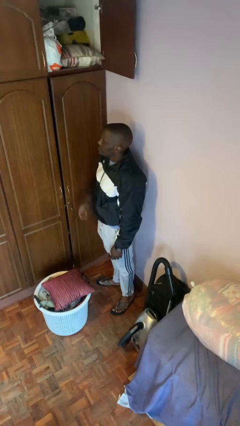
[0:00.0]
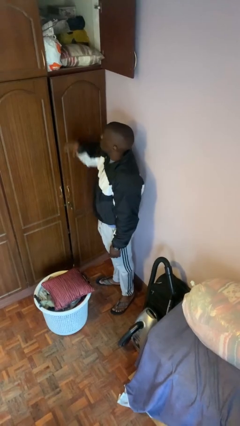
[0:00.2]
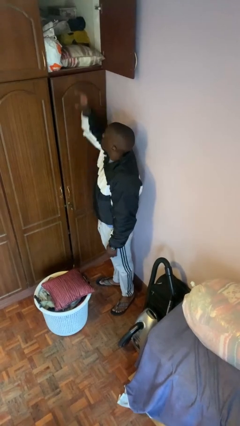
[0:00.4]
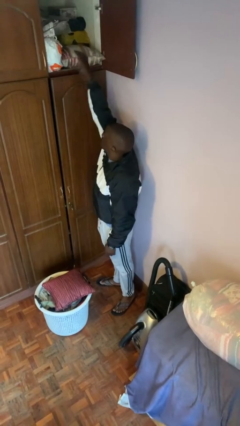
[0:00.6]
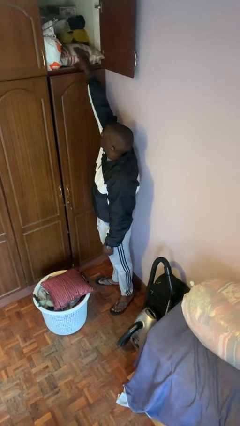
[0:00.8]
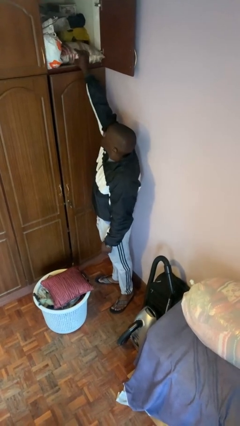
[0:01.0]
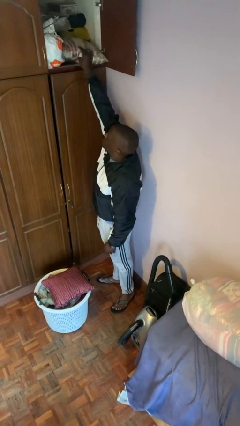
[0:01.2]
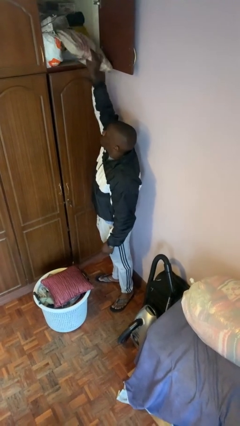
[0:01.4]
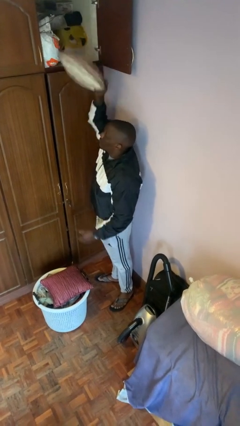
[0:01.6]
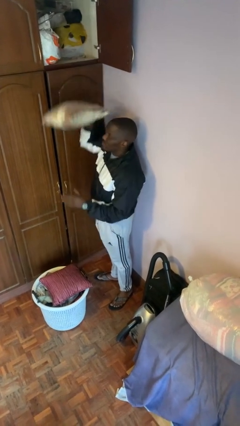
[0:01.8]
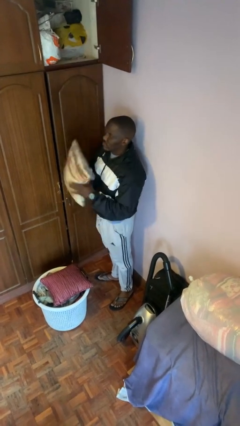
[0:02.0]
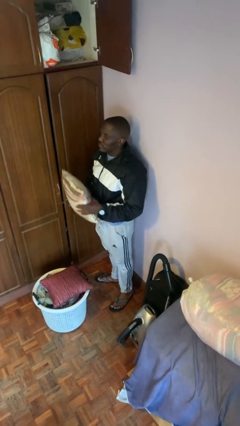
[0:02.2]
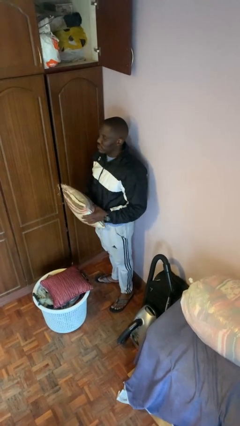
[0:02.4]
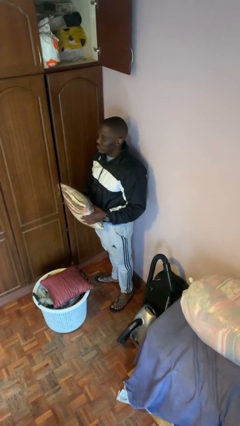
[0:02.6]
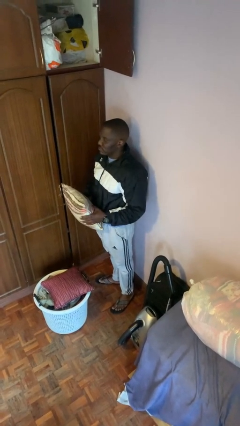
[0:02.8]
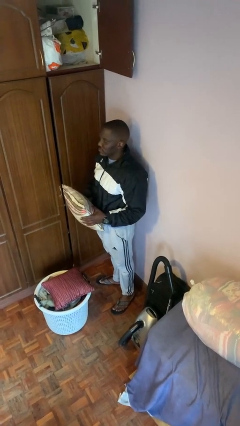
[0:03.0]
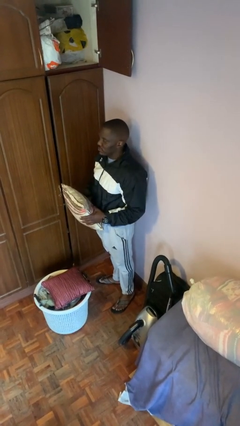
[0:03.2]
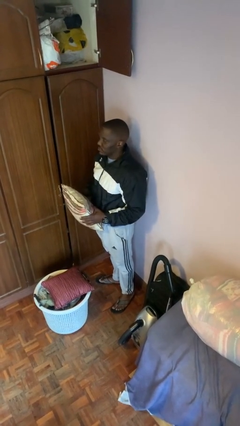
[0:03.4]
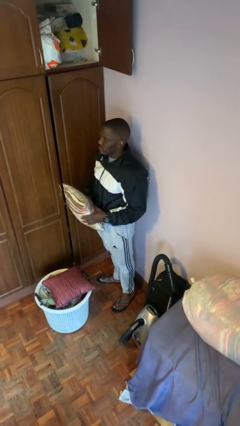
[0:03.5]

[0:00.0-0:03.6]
person picks up object from shelf

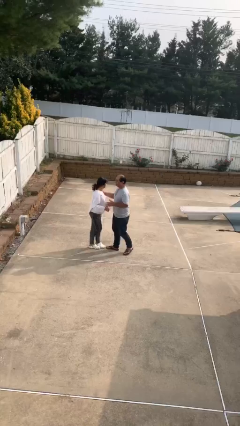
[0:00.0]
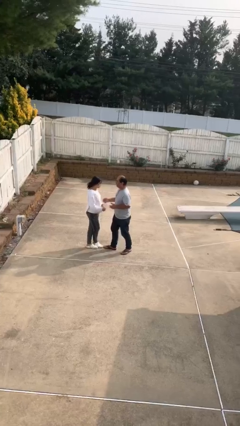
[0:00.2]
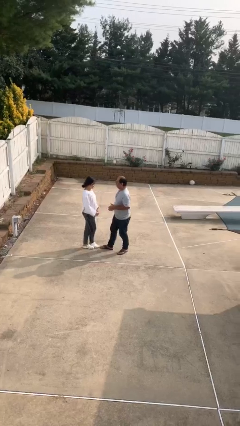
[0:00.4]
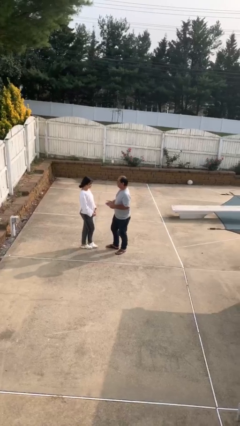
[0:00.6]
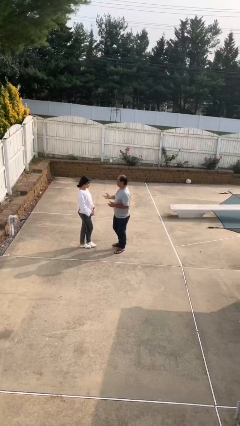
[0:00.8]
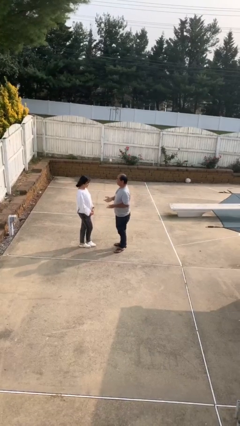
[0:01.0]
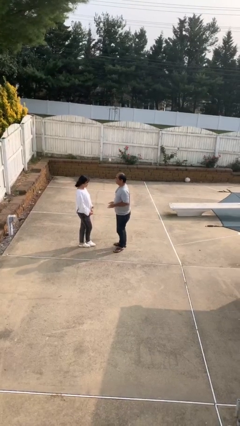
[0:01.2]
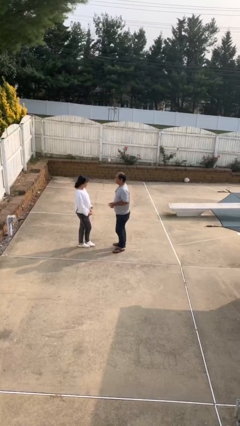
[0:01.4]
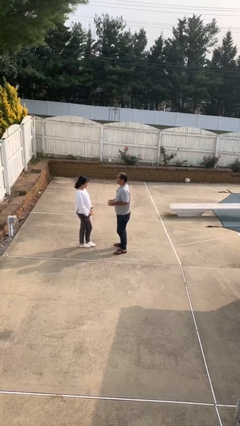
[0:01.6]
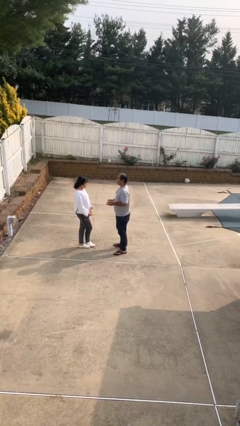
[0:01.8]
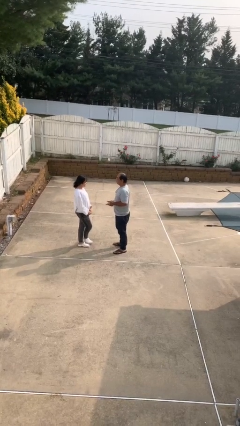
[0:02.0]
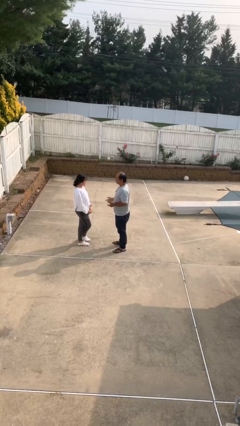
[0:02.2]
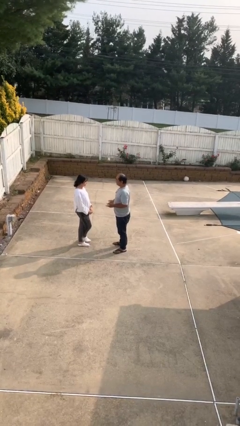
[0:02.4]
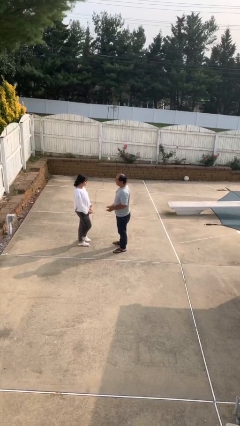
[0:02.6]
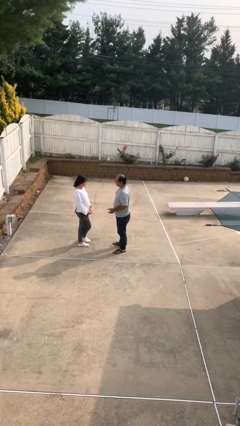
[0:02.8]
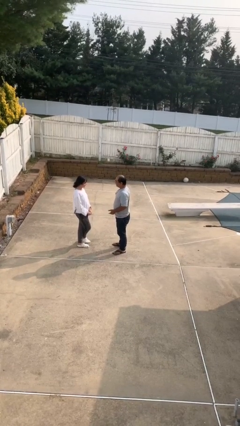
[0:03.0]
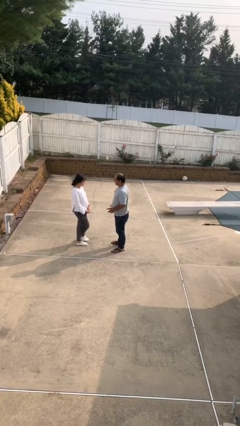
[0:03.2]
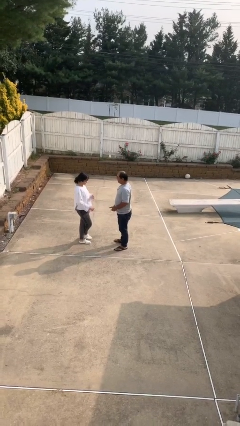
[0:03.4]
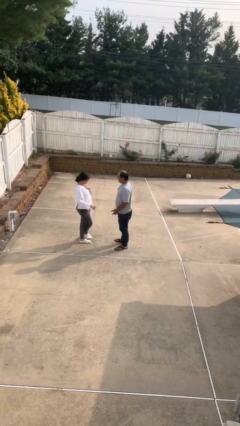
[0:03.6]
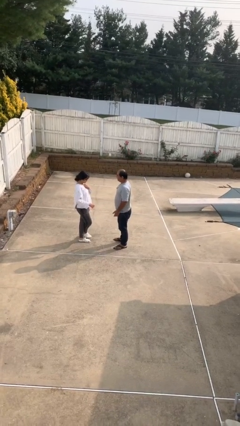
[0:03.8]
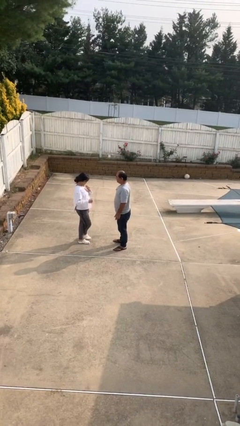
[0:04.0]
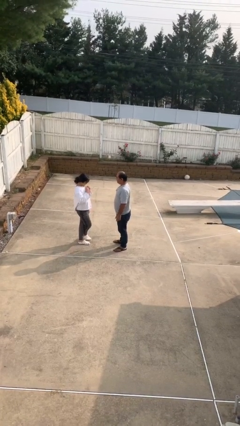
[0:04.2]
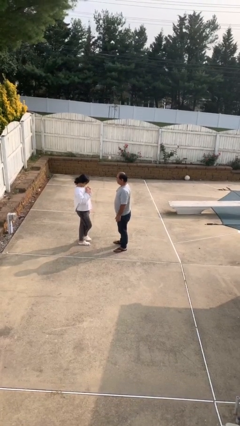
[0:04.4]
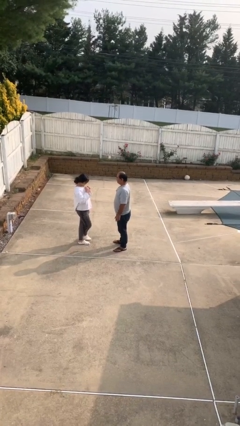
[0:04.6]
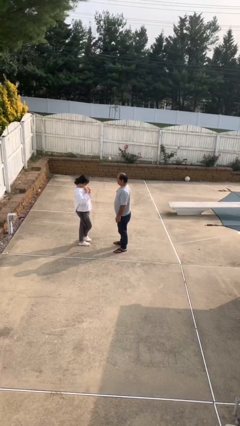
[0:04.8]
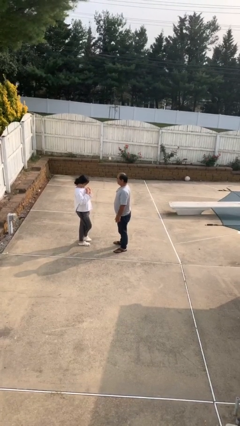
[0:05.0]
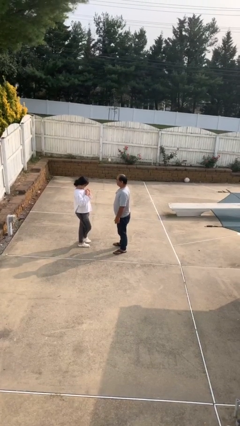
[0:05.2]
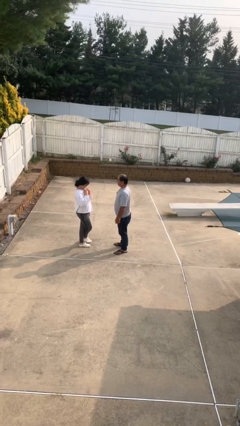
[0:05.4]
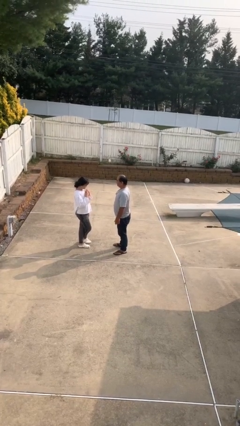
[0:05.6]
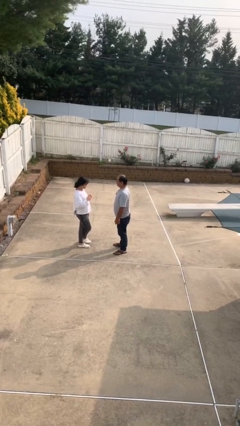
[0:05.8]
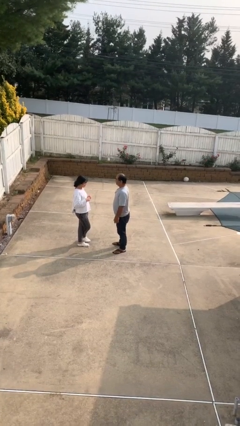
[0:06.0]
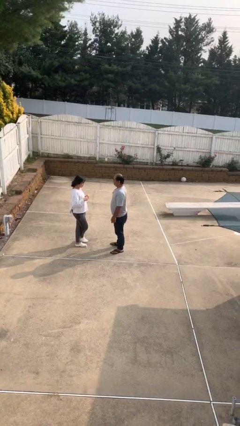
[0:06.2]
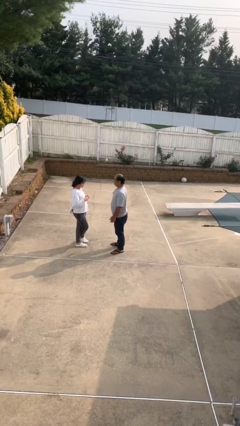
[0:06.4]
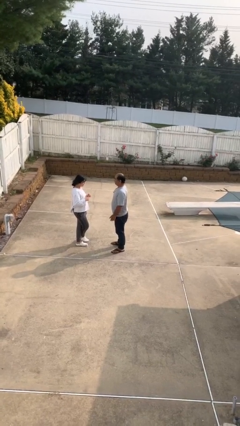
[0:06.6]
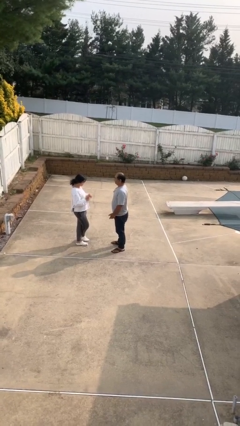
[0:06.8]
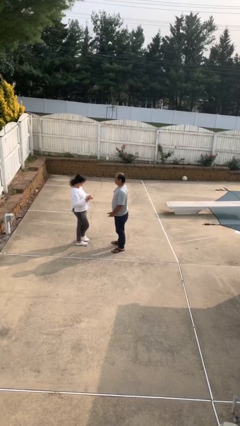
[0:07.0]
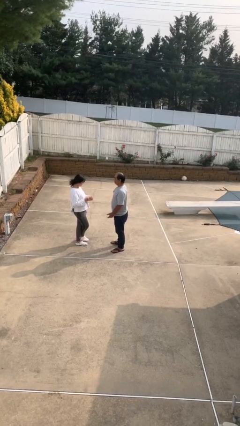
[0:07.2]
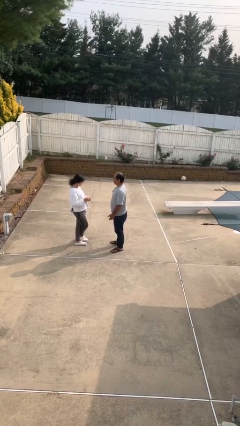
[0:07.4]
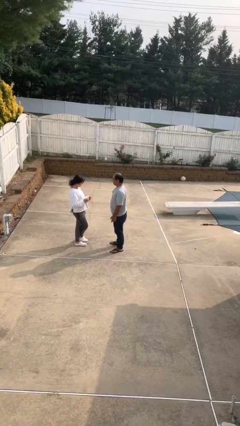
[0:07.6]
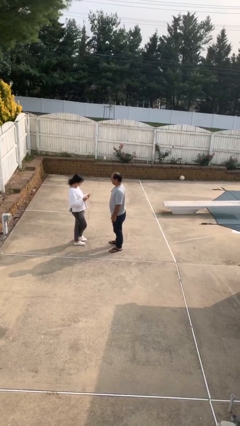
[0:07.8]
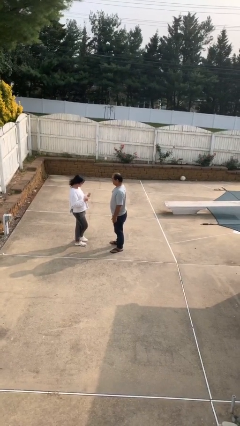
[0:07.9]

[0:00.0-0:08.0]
person talks to person

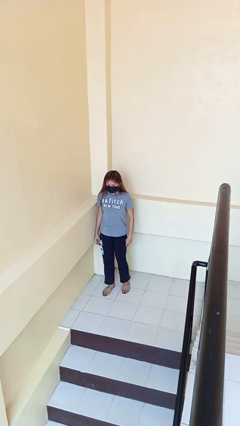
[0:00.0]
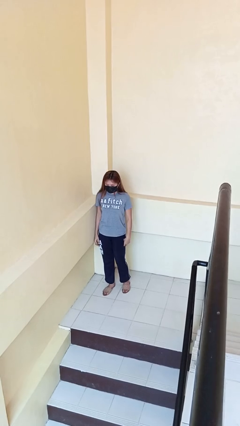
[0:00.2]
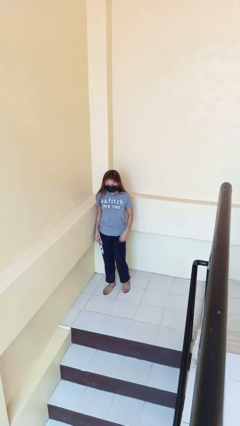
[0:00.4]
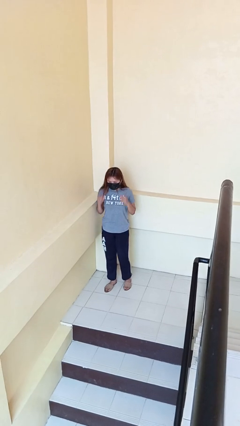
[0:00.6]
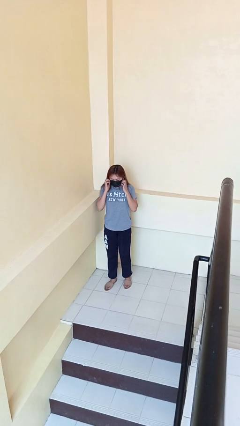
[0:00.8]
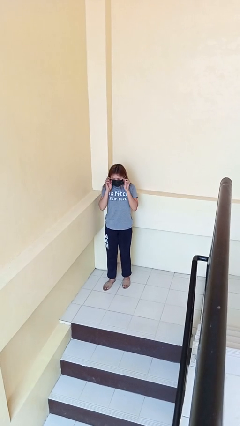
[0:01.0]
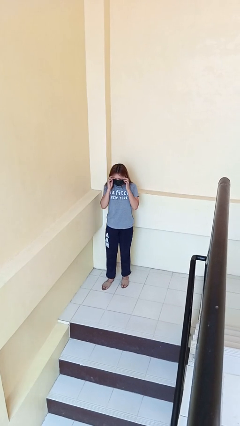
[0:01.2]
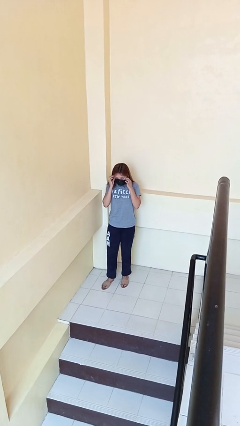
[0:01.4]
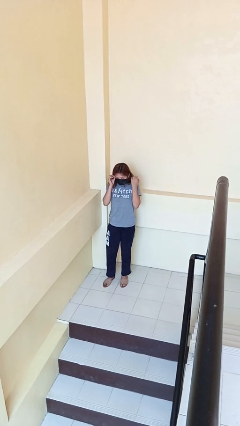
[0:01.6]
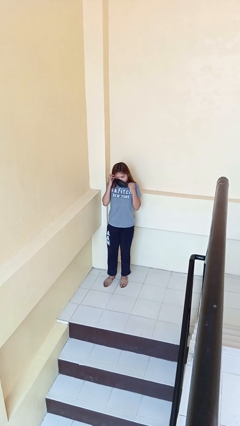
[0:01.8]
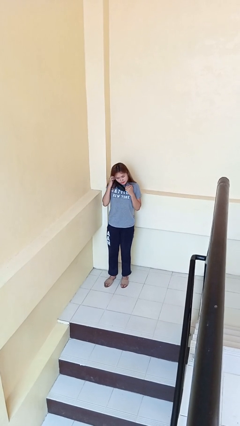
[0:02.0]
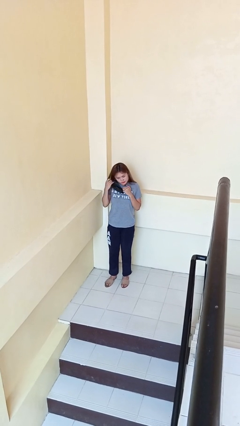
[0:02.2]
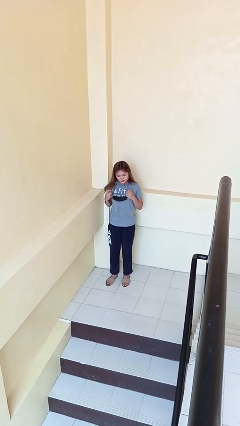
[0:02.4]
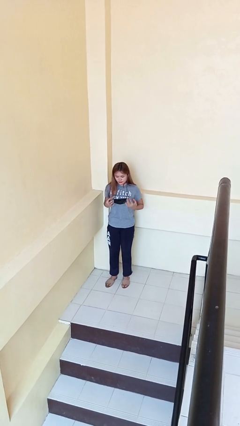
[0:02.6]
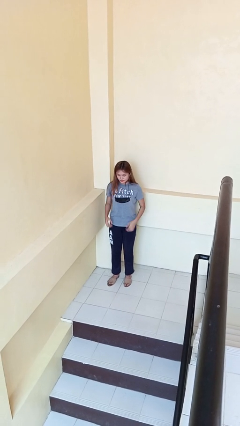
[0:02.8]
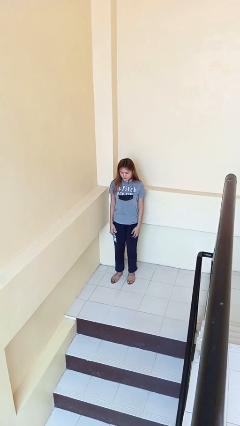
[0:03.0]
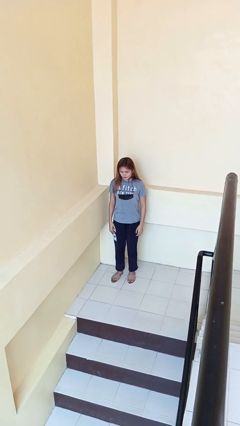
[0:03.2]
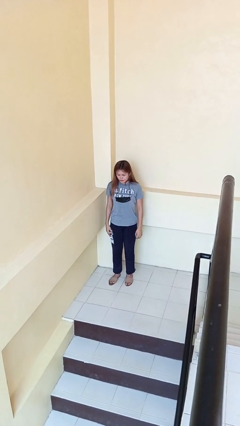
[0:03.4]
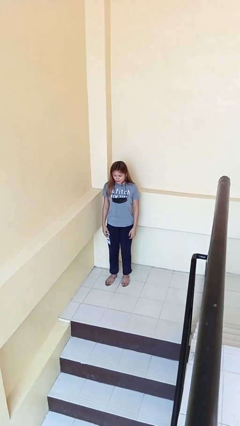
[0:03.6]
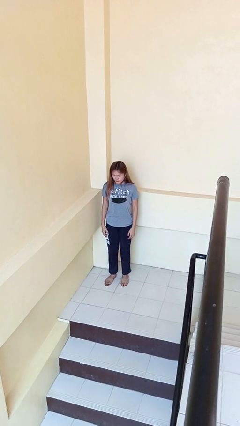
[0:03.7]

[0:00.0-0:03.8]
person takes off facemask

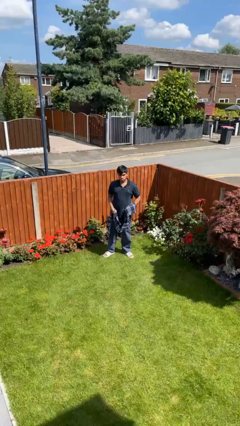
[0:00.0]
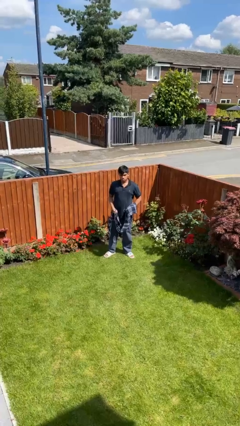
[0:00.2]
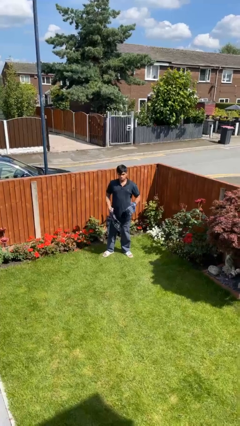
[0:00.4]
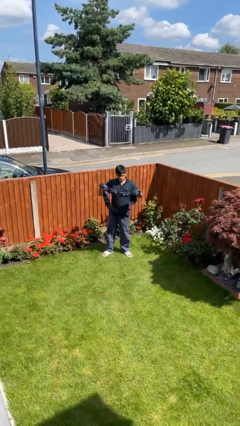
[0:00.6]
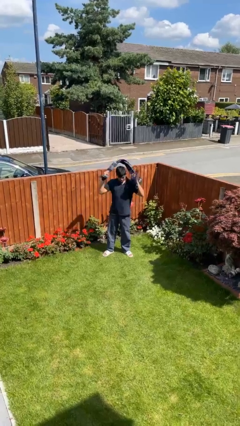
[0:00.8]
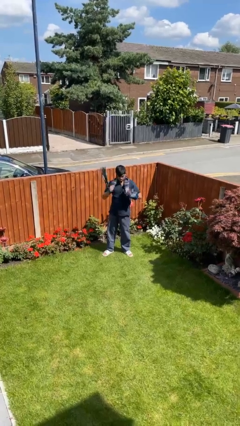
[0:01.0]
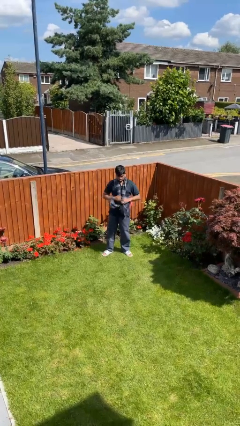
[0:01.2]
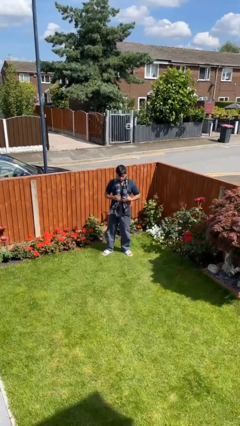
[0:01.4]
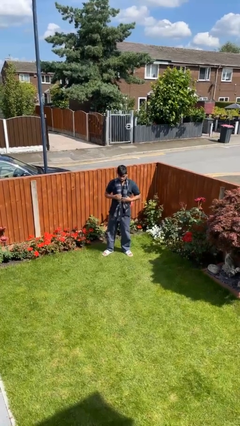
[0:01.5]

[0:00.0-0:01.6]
person puts on scarf

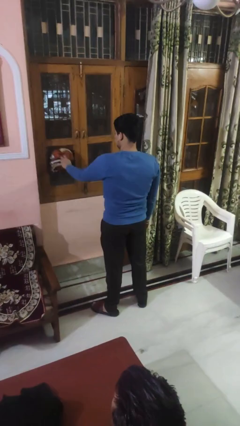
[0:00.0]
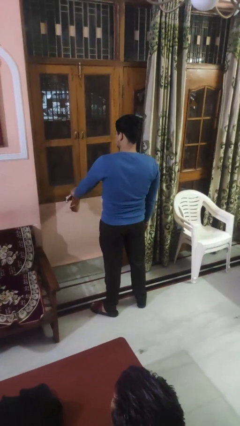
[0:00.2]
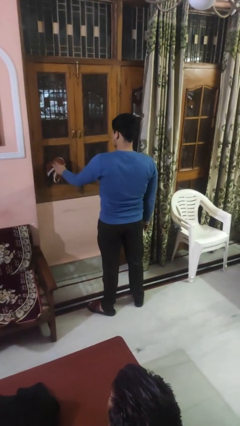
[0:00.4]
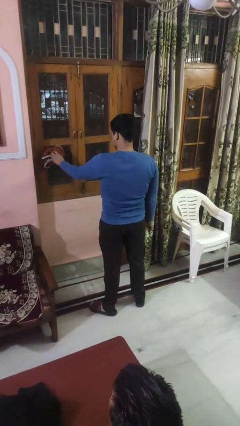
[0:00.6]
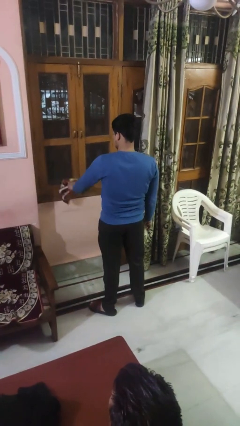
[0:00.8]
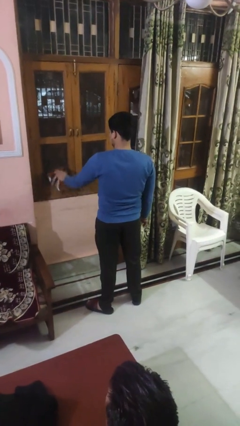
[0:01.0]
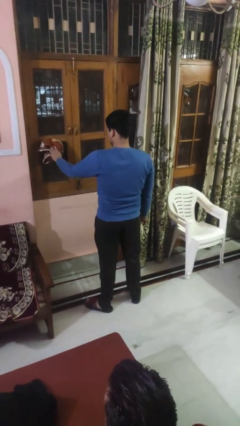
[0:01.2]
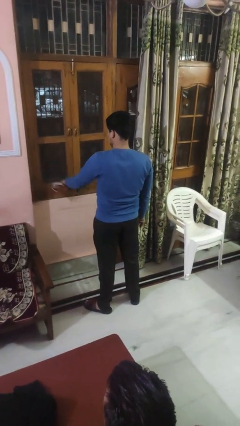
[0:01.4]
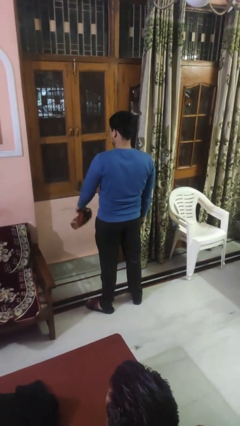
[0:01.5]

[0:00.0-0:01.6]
person washes window
